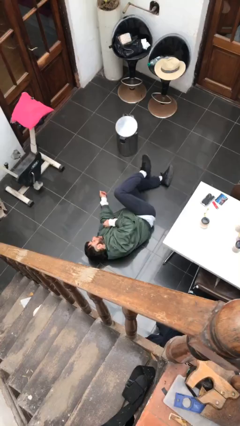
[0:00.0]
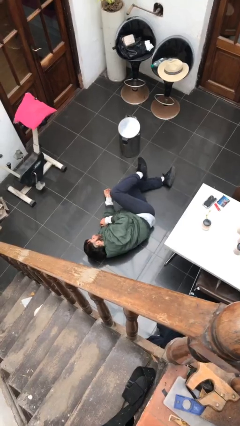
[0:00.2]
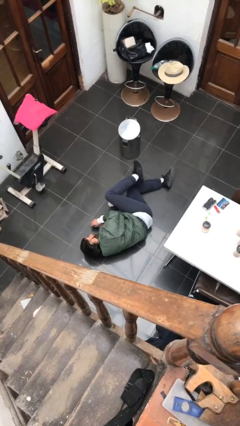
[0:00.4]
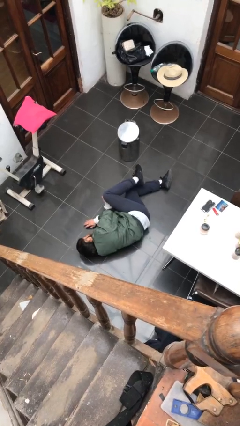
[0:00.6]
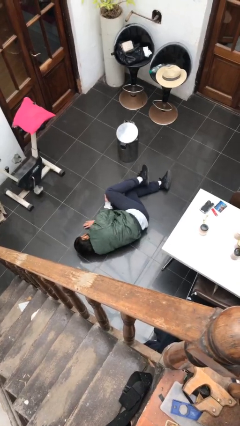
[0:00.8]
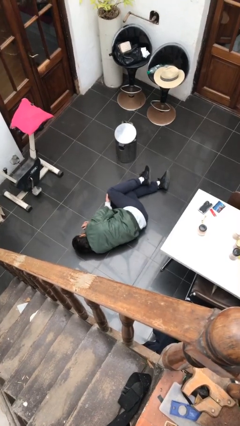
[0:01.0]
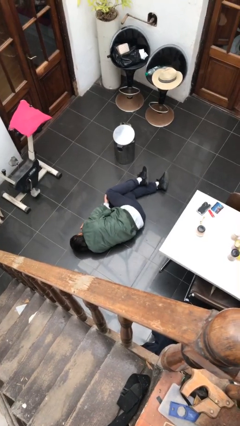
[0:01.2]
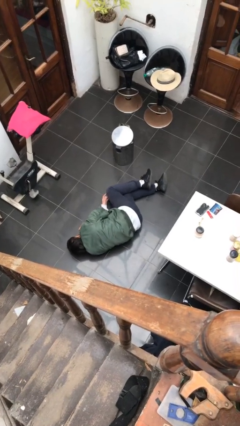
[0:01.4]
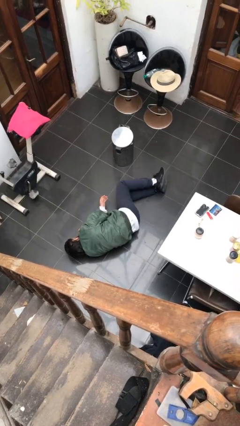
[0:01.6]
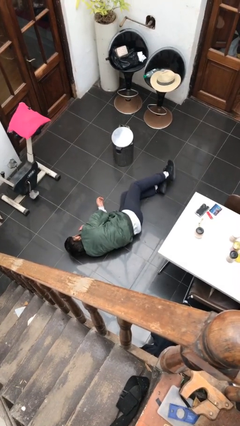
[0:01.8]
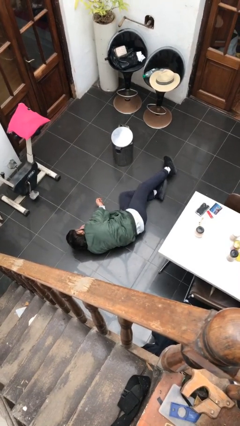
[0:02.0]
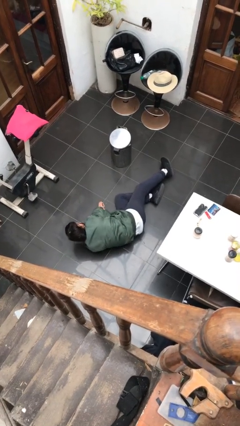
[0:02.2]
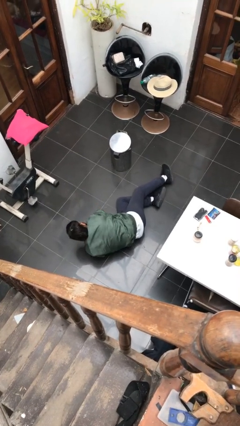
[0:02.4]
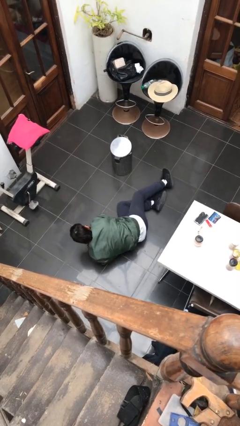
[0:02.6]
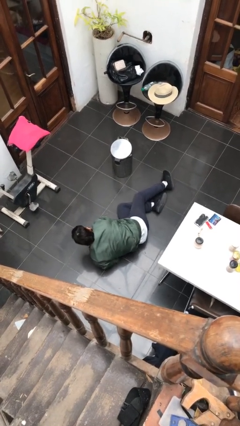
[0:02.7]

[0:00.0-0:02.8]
person lies down on floor

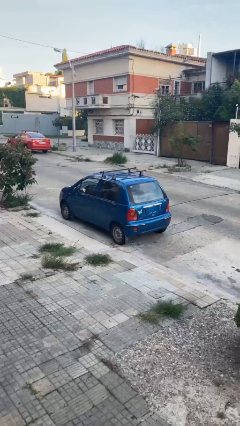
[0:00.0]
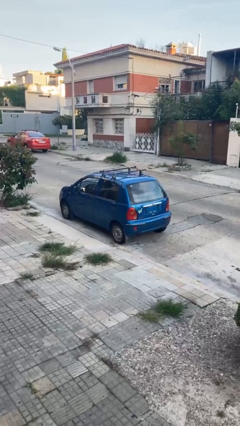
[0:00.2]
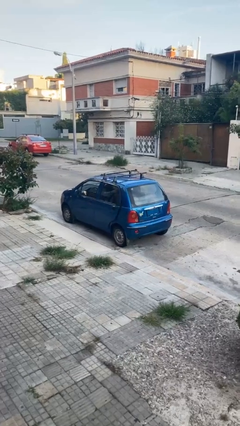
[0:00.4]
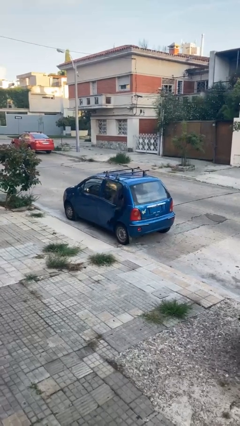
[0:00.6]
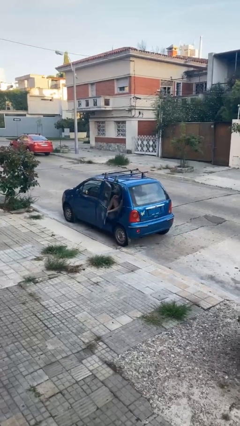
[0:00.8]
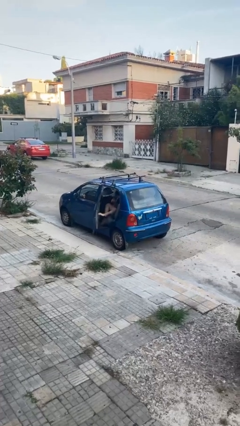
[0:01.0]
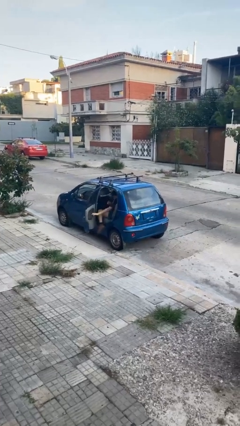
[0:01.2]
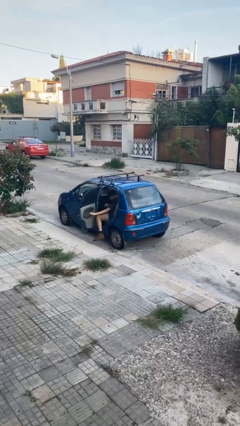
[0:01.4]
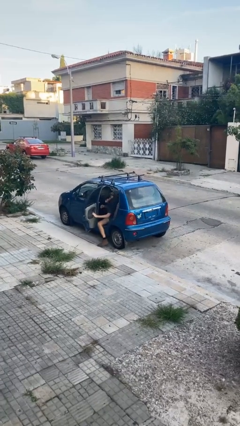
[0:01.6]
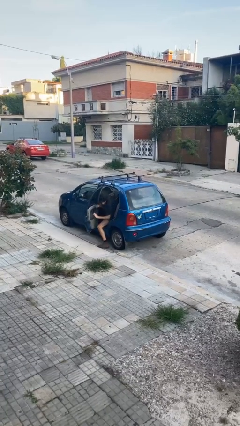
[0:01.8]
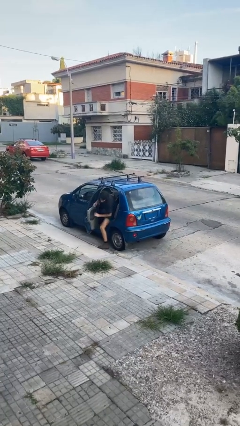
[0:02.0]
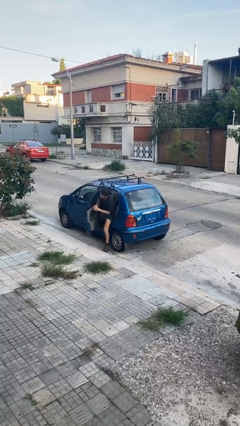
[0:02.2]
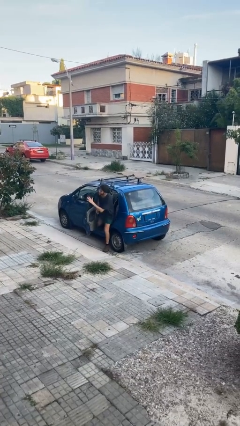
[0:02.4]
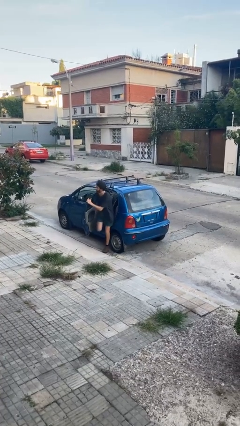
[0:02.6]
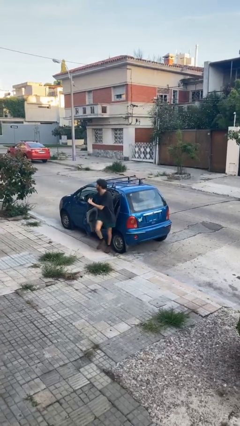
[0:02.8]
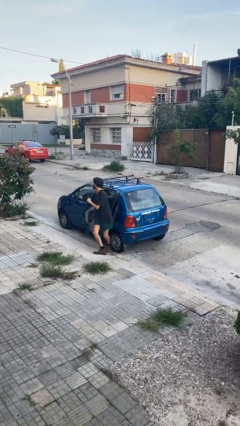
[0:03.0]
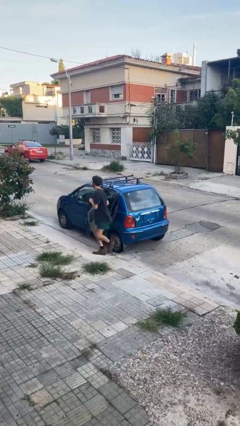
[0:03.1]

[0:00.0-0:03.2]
car drops off person

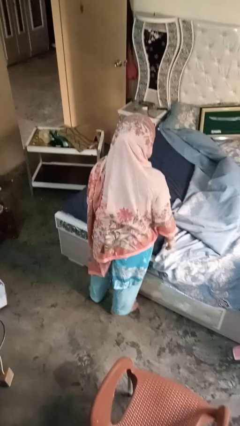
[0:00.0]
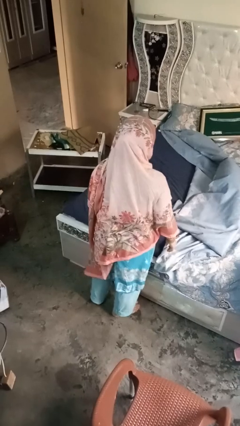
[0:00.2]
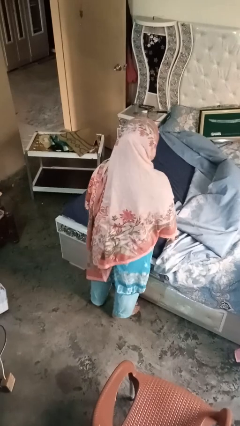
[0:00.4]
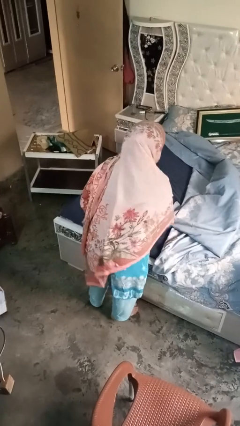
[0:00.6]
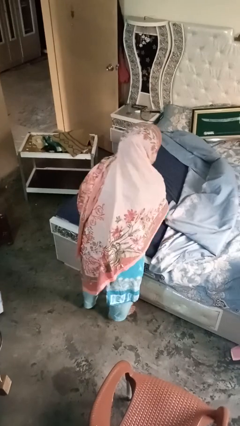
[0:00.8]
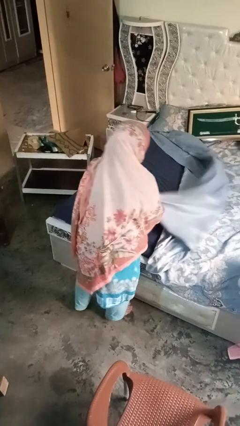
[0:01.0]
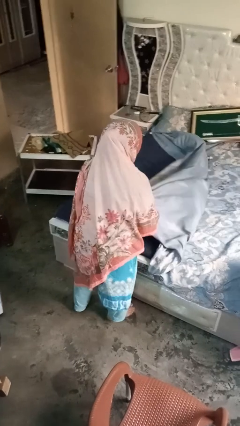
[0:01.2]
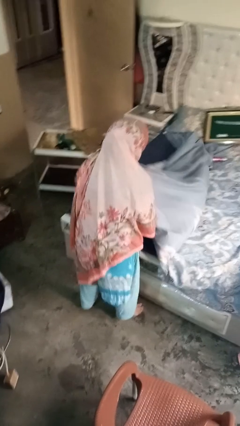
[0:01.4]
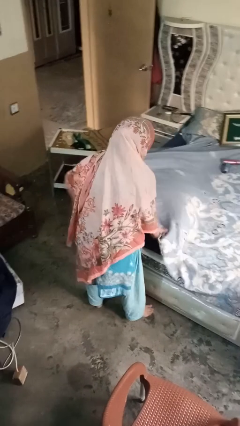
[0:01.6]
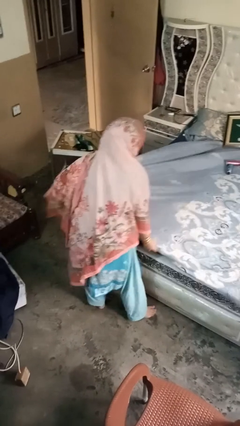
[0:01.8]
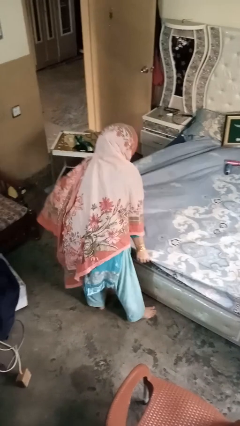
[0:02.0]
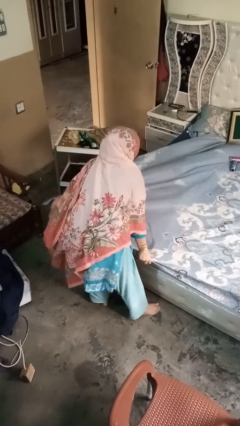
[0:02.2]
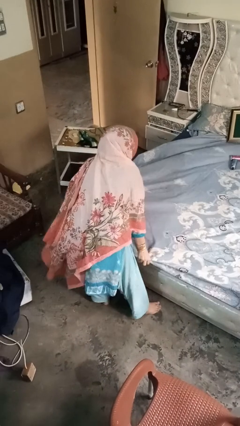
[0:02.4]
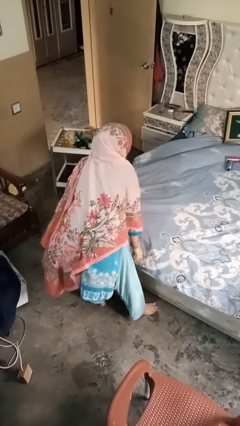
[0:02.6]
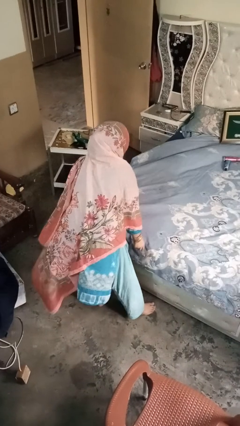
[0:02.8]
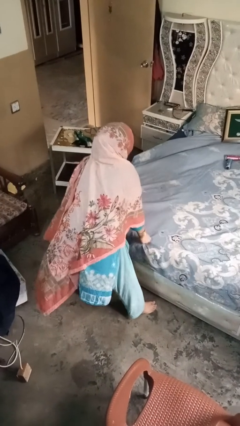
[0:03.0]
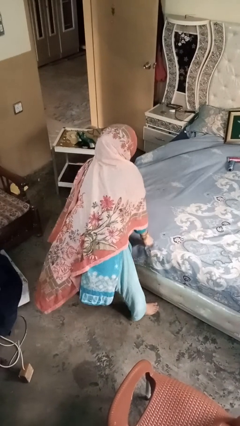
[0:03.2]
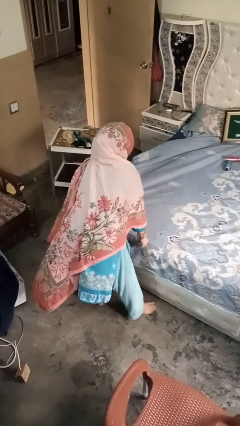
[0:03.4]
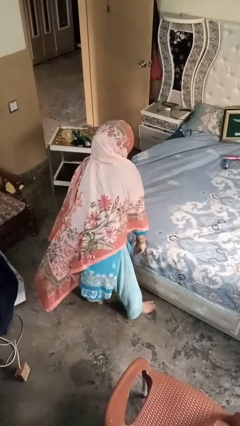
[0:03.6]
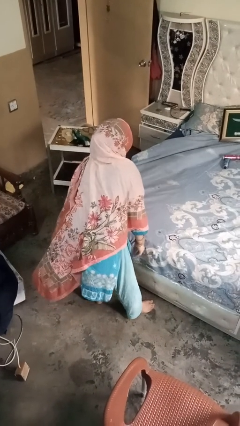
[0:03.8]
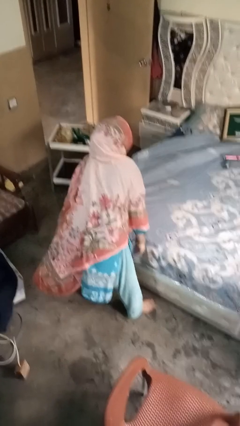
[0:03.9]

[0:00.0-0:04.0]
person makes bed

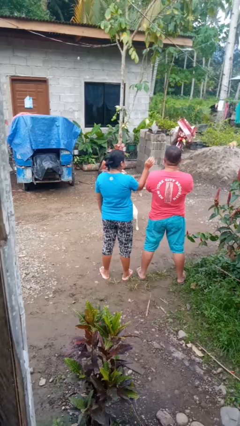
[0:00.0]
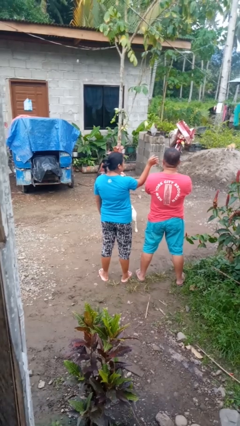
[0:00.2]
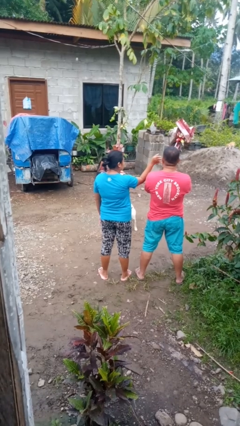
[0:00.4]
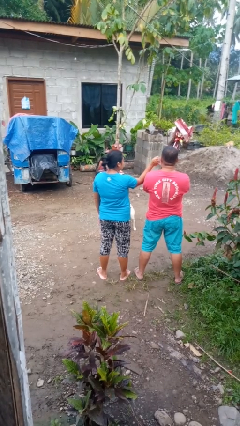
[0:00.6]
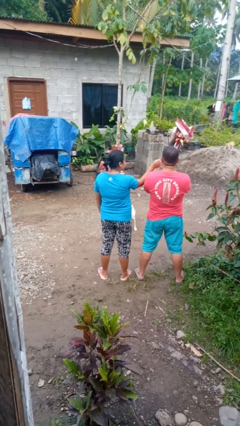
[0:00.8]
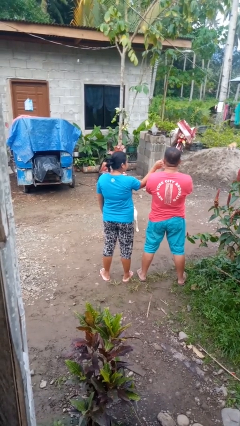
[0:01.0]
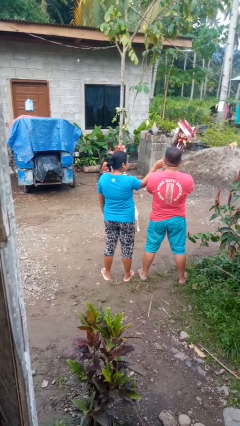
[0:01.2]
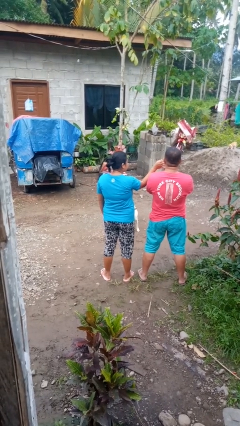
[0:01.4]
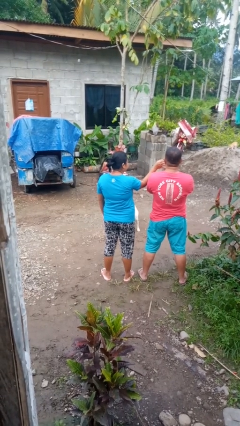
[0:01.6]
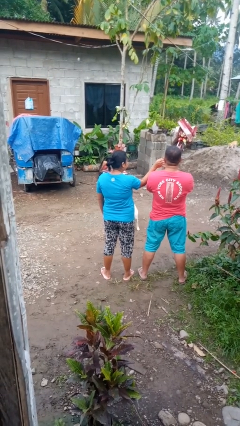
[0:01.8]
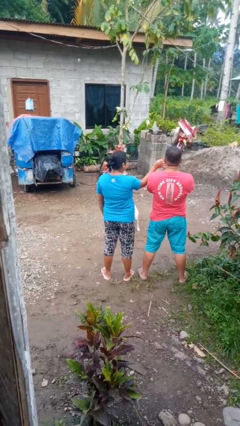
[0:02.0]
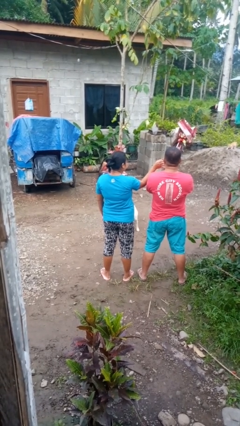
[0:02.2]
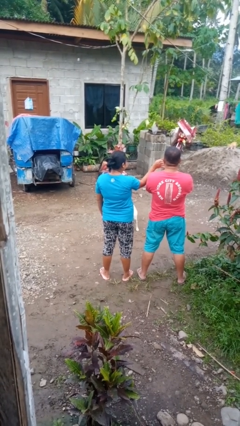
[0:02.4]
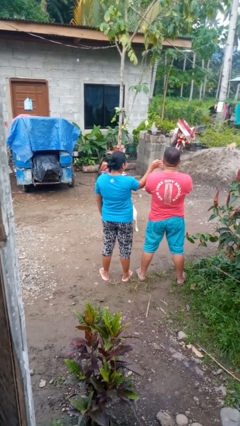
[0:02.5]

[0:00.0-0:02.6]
person touches face of person

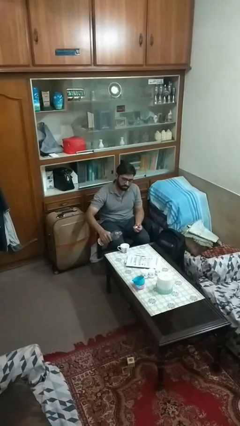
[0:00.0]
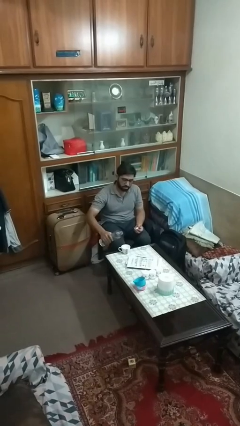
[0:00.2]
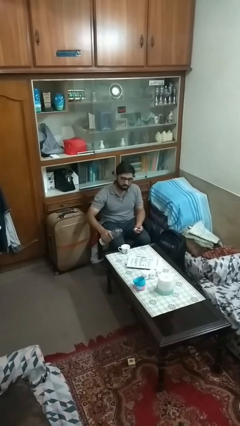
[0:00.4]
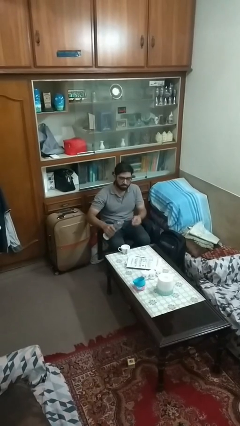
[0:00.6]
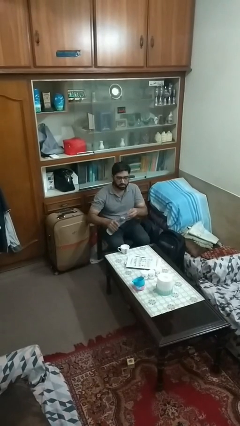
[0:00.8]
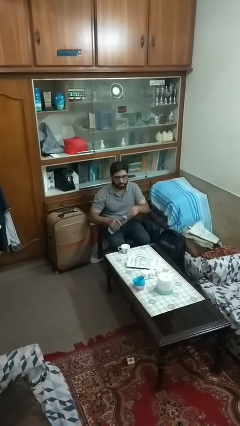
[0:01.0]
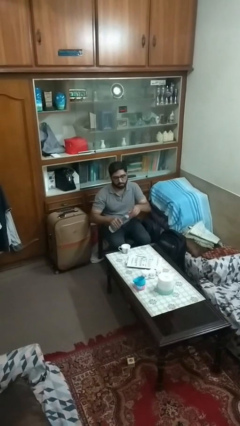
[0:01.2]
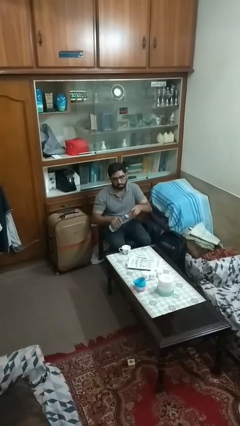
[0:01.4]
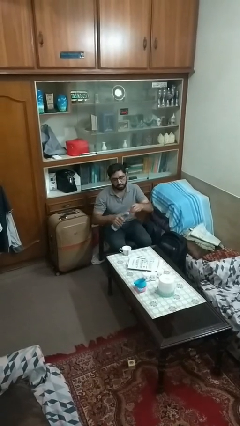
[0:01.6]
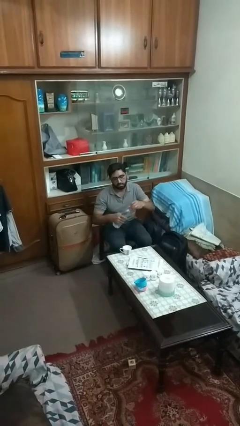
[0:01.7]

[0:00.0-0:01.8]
person screws lid to bottle

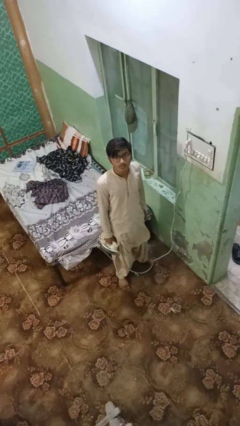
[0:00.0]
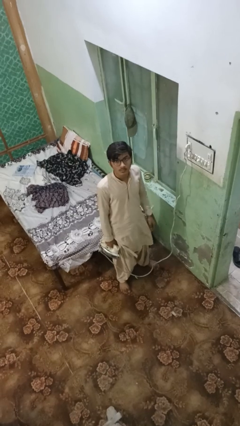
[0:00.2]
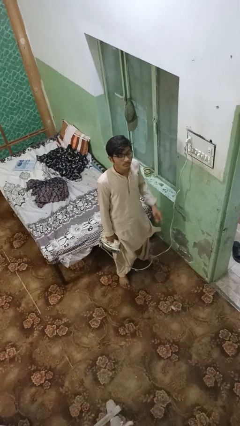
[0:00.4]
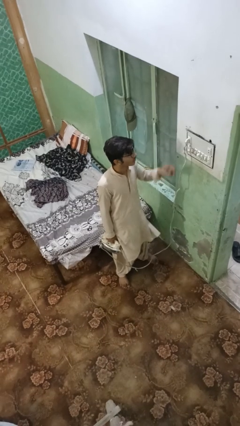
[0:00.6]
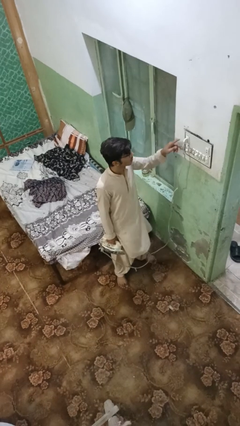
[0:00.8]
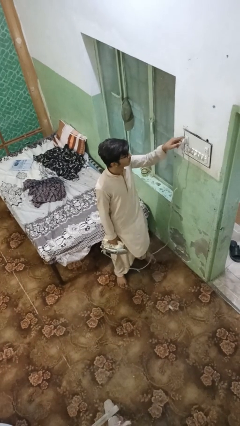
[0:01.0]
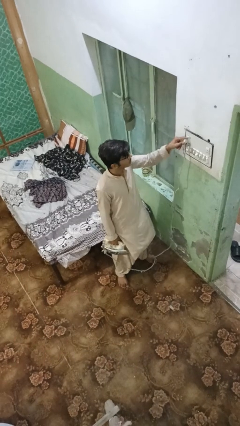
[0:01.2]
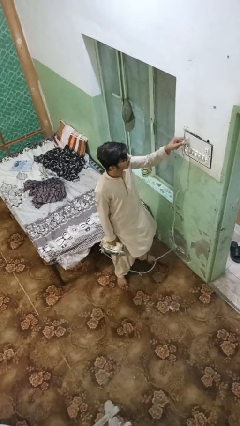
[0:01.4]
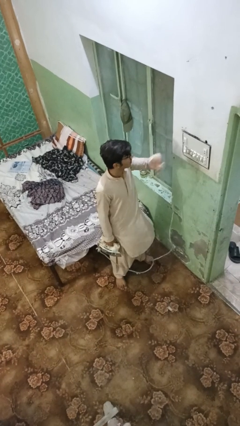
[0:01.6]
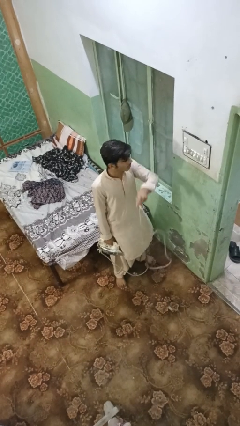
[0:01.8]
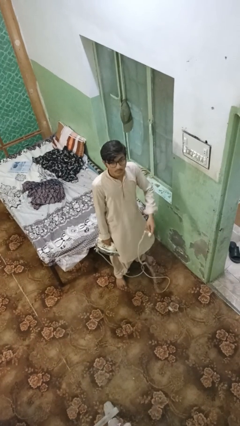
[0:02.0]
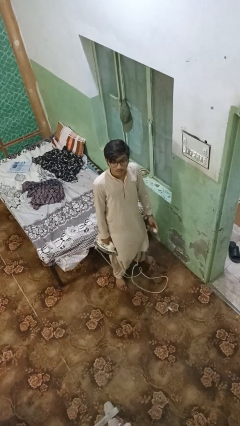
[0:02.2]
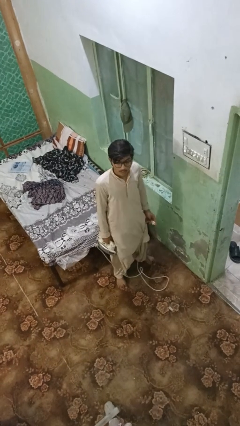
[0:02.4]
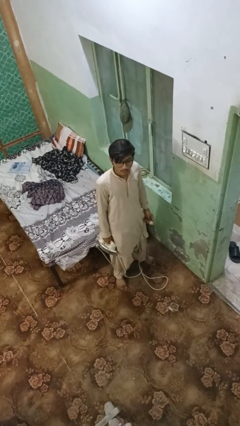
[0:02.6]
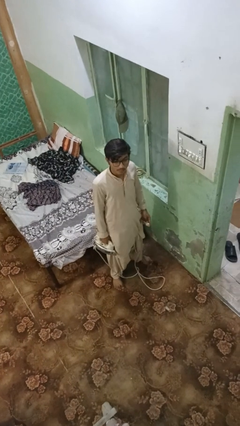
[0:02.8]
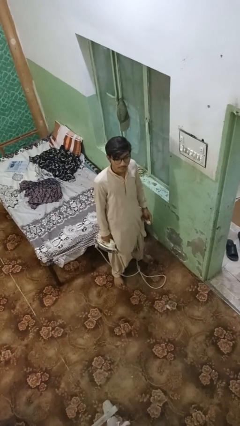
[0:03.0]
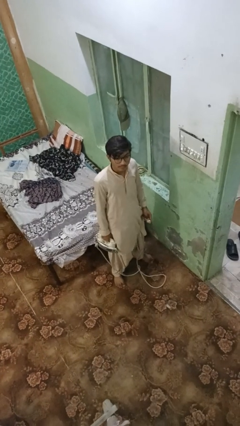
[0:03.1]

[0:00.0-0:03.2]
person unplugs from electrical socket
